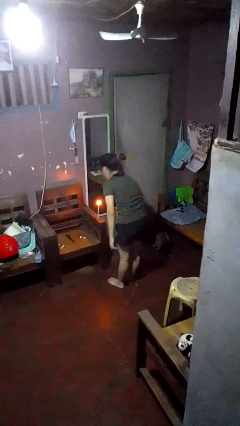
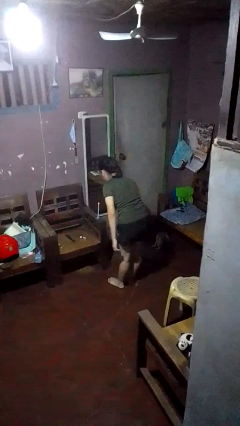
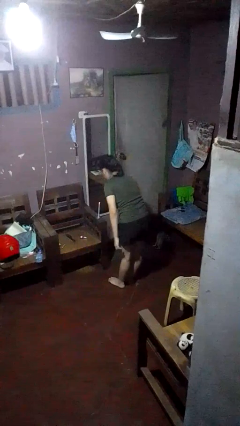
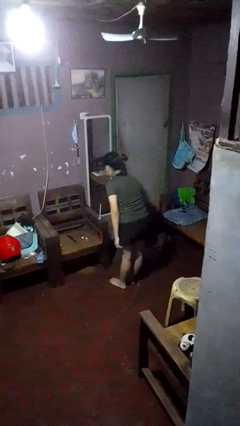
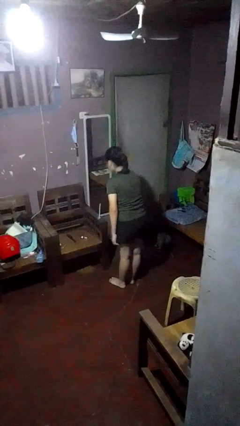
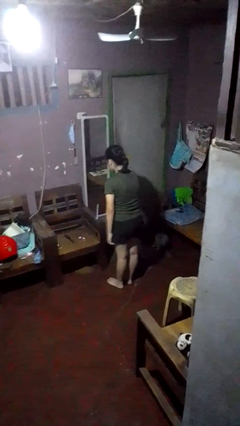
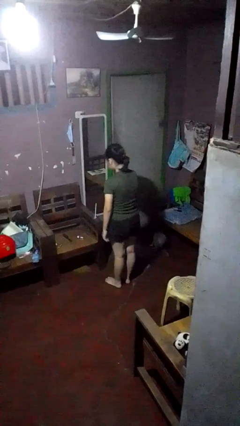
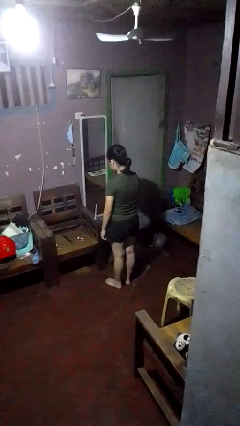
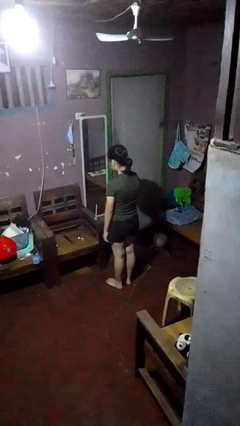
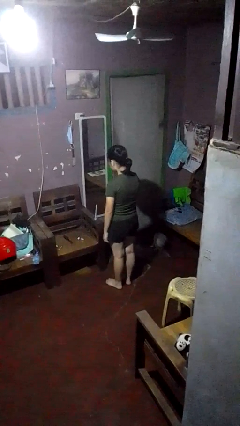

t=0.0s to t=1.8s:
person extinguishes candle

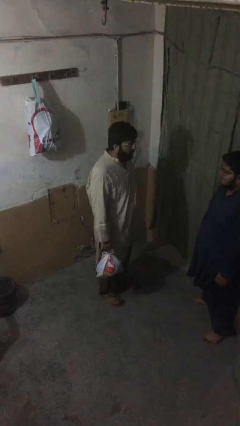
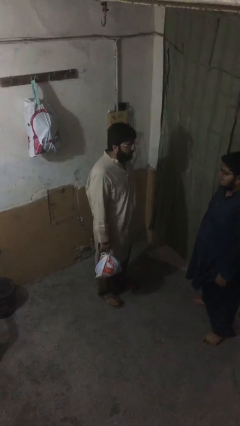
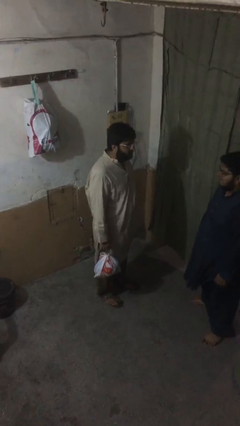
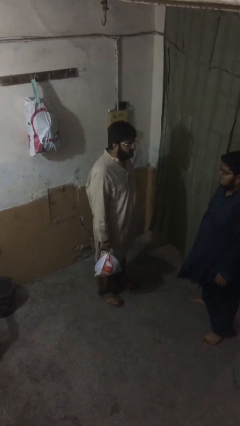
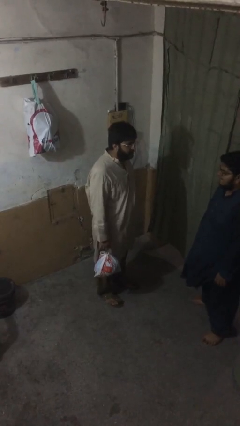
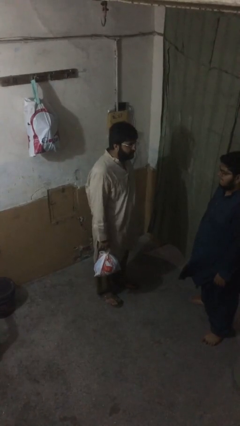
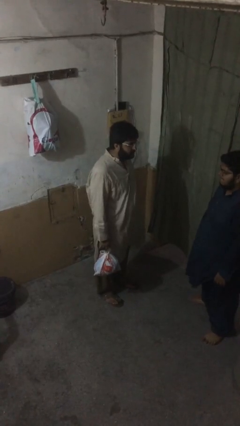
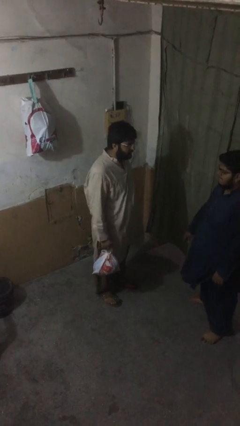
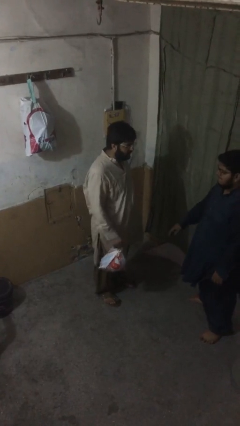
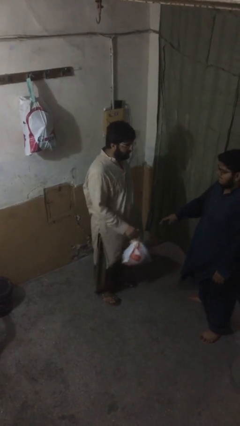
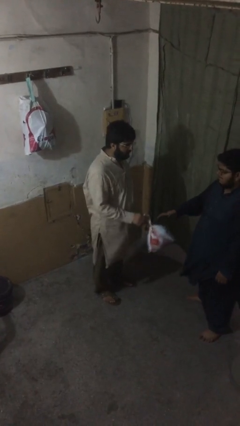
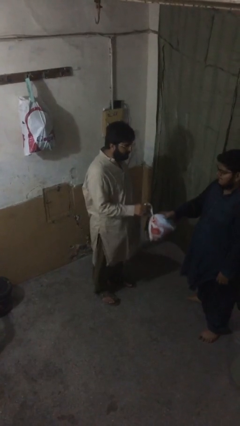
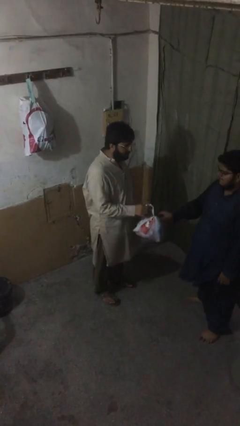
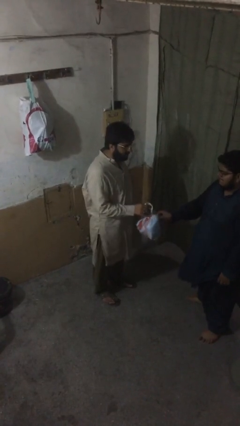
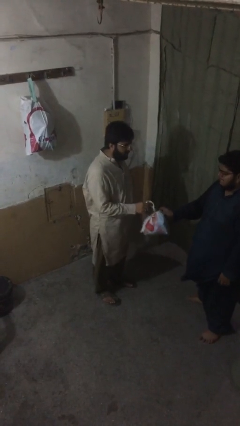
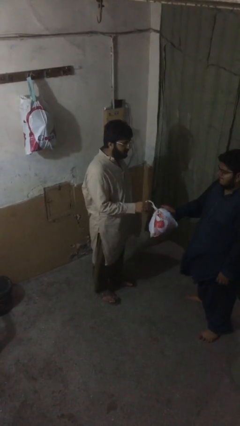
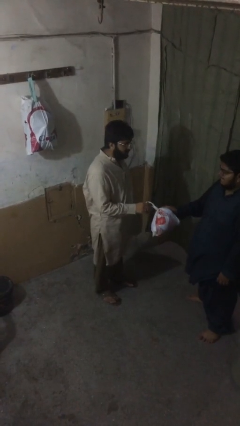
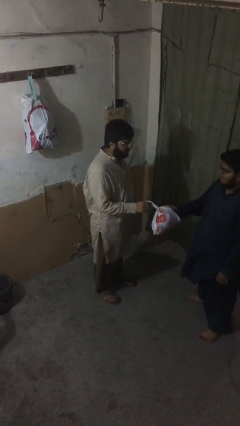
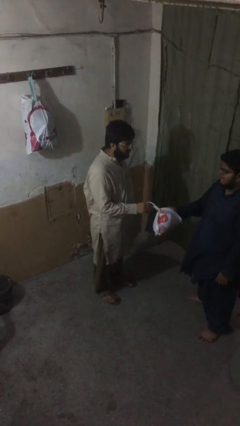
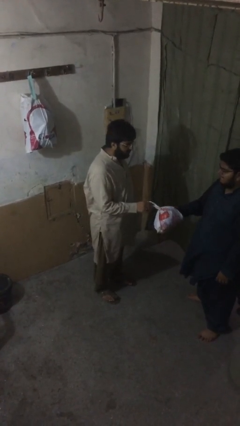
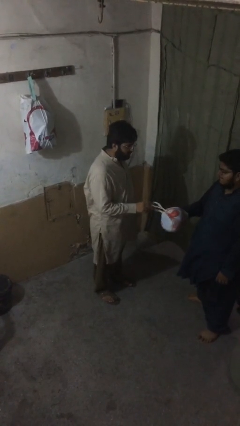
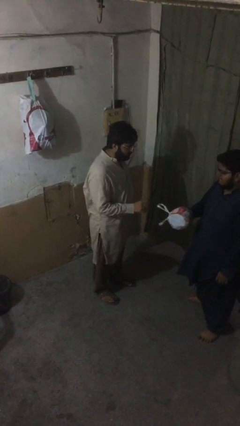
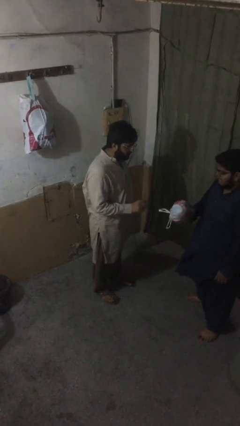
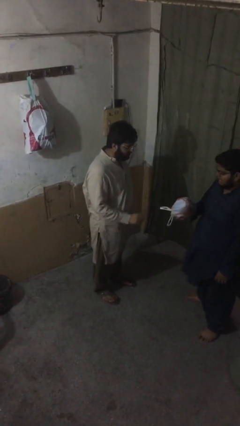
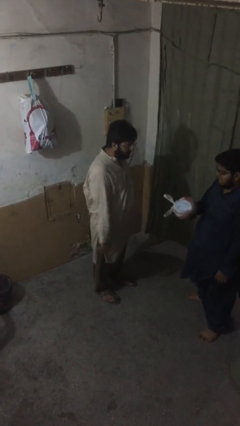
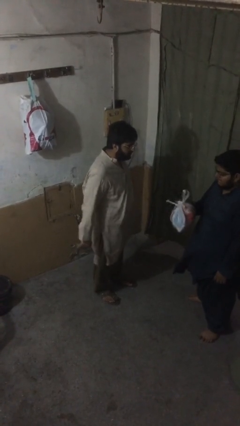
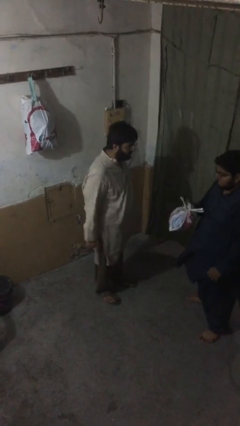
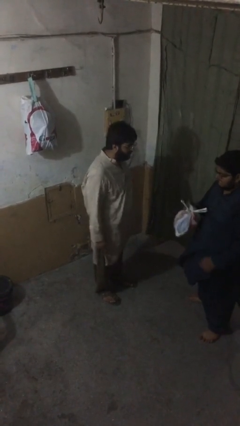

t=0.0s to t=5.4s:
person transfers object to person

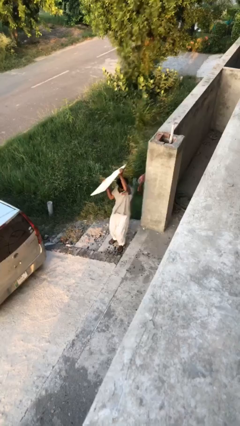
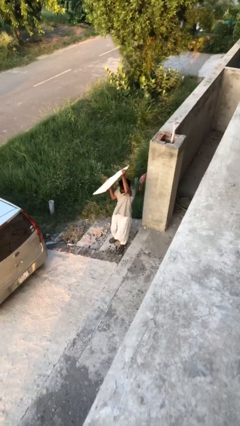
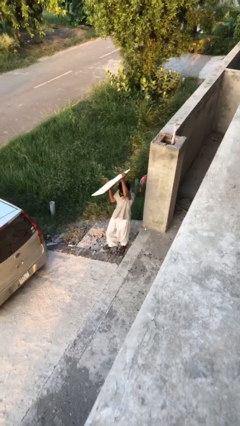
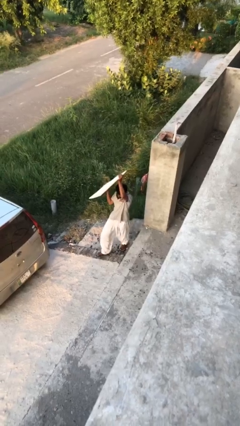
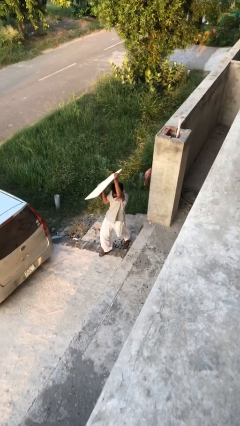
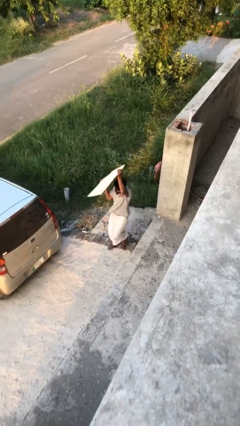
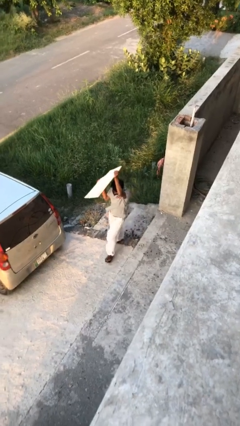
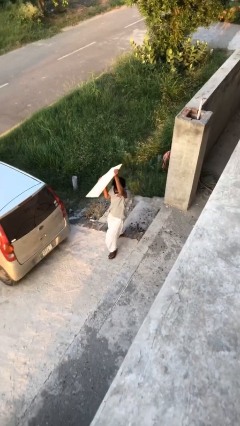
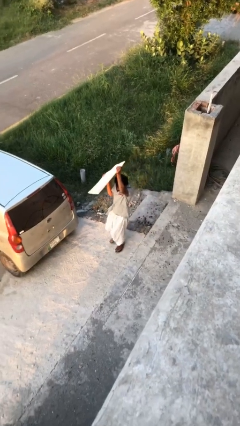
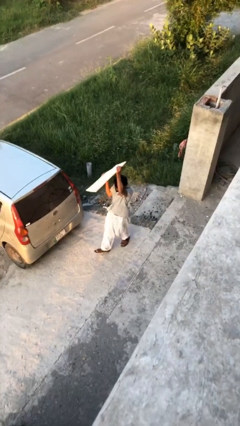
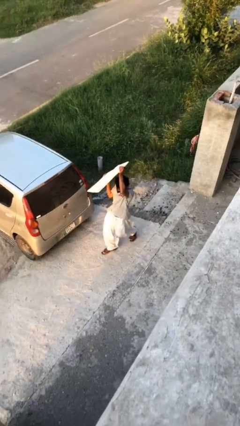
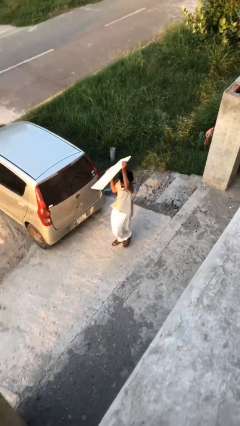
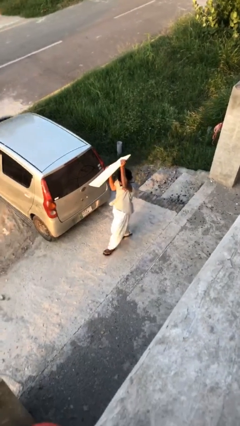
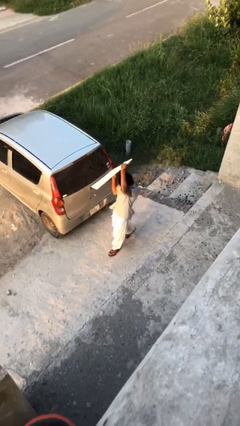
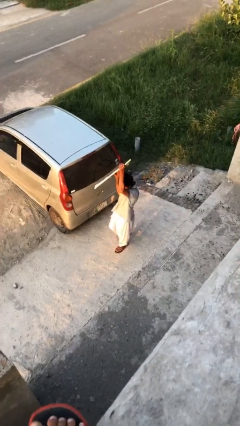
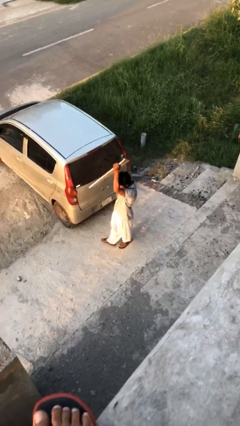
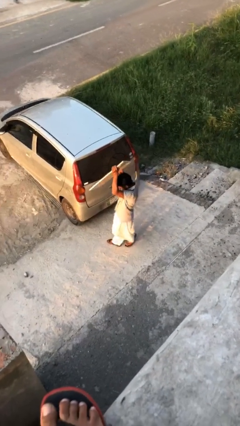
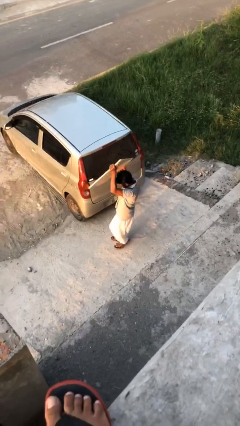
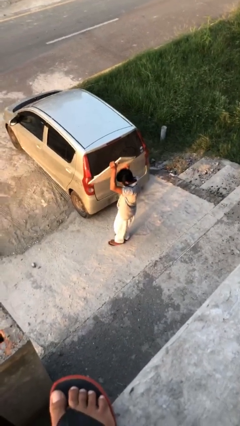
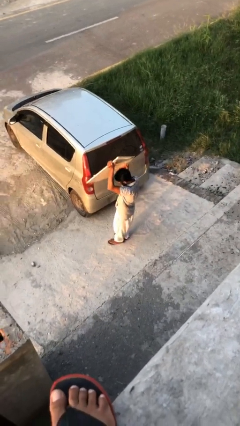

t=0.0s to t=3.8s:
person carries heavy object

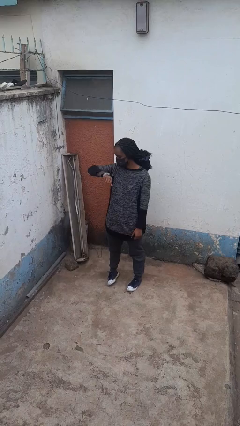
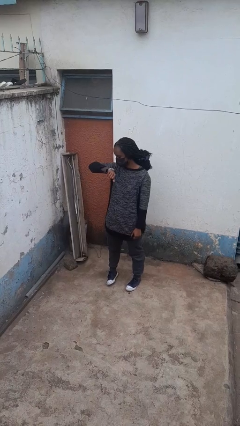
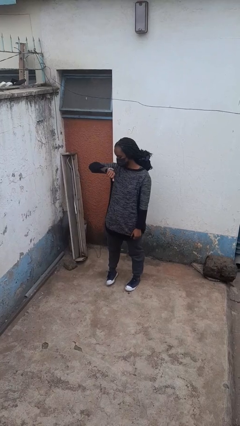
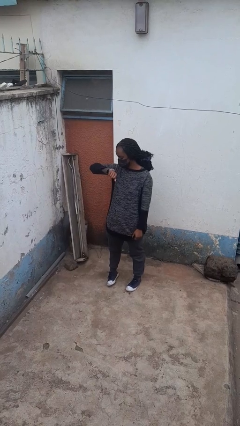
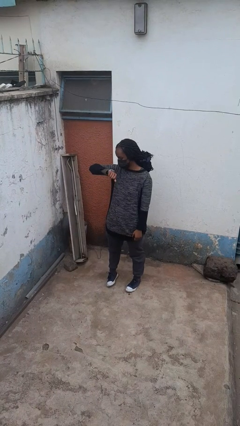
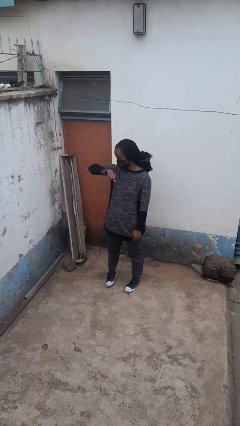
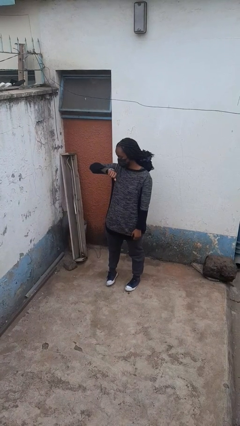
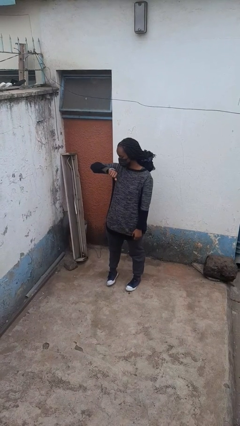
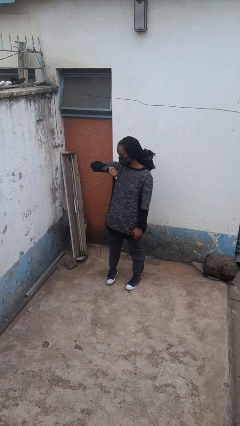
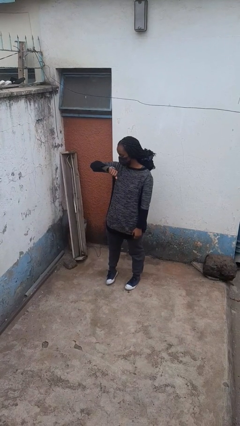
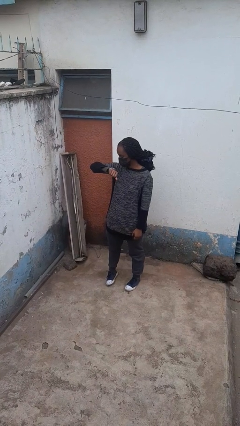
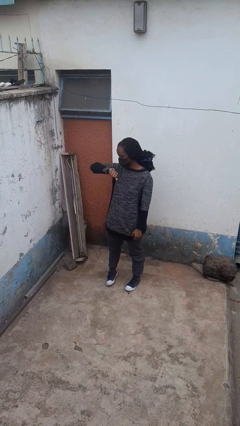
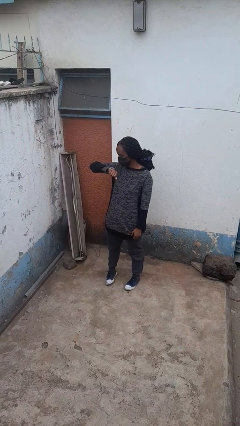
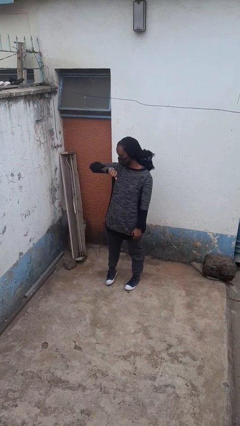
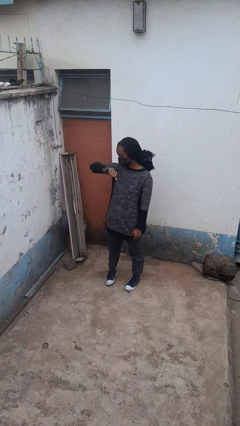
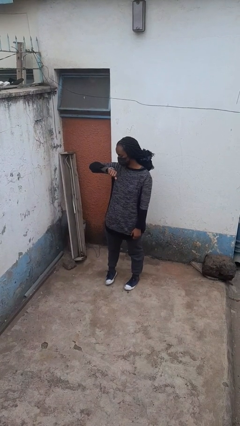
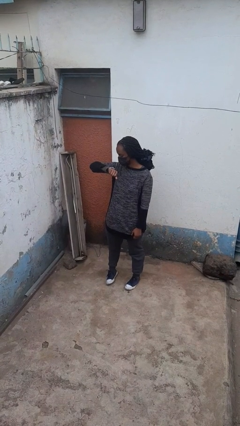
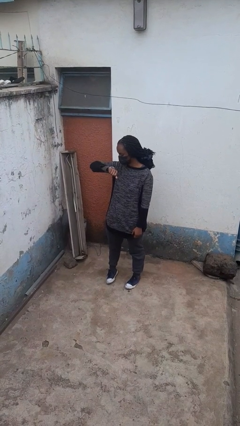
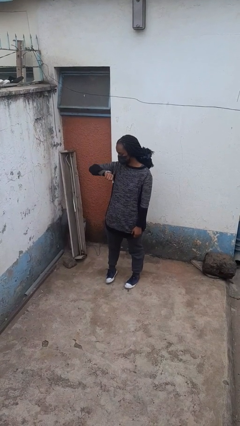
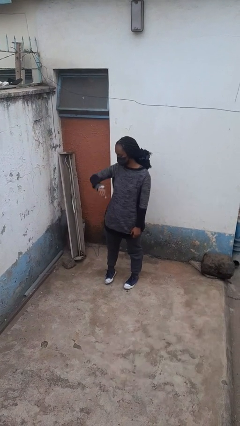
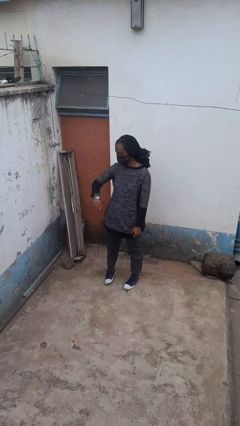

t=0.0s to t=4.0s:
person looks at wristwatch

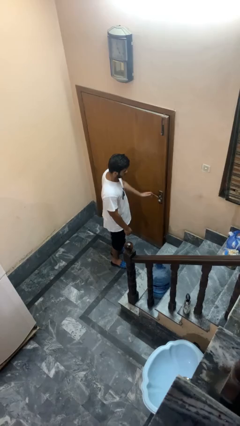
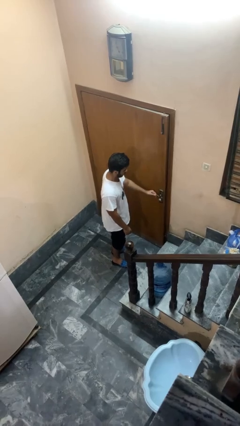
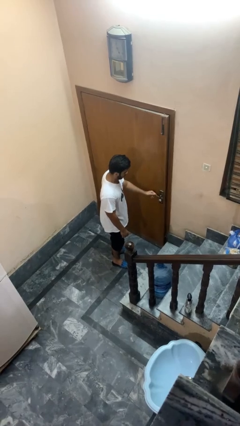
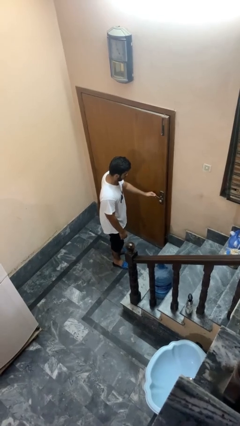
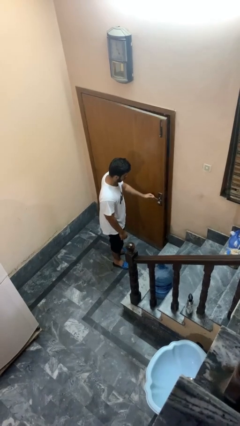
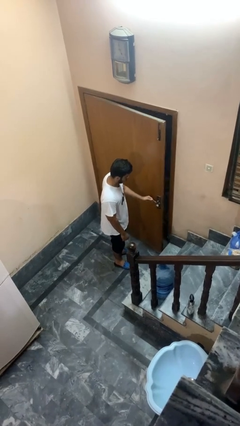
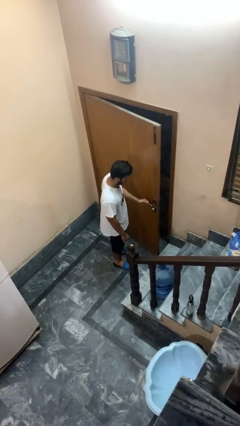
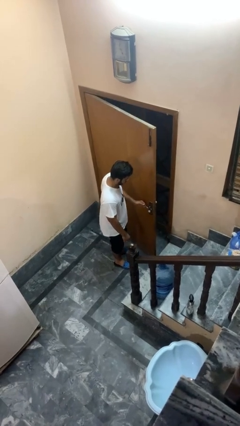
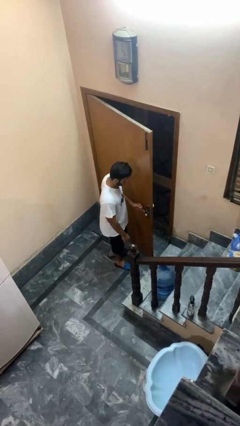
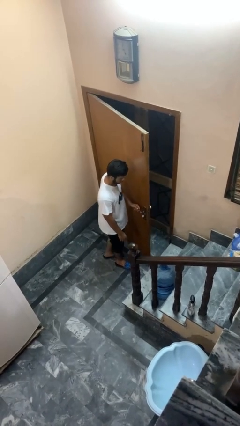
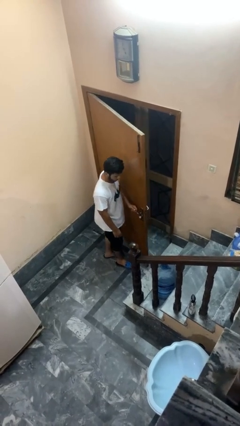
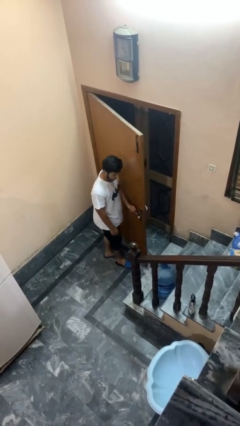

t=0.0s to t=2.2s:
person opens facility door
